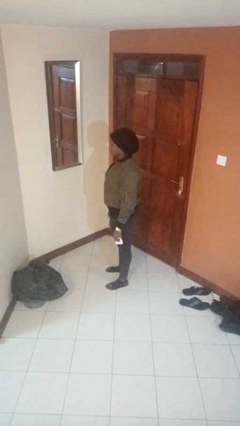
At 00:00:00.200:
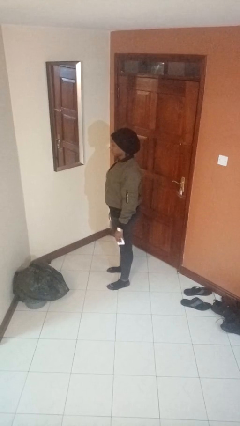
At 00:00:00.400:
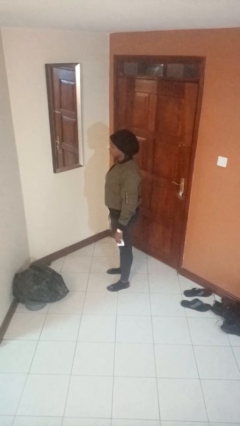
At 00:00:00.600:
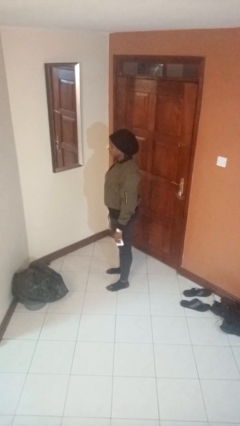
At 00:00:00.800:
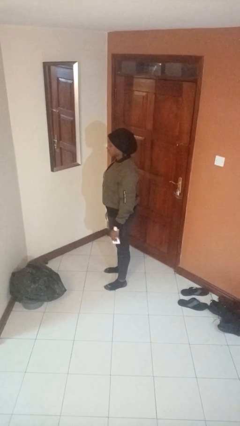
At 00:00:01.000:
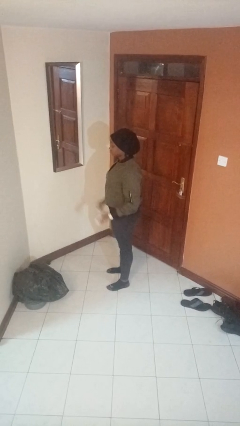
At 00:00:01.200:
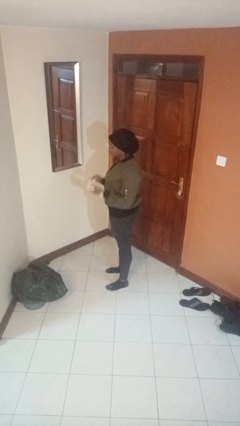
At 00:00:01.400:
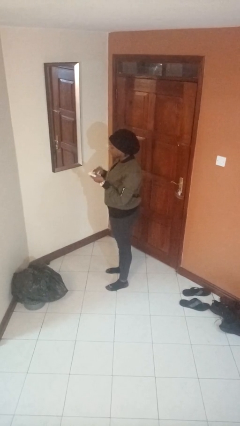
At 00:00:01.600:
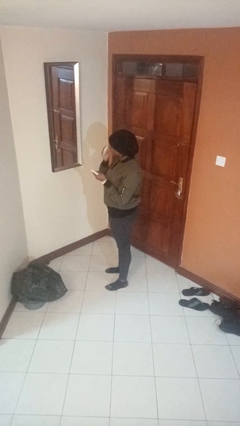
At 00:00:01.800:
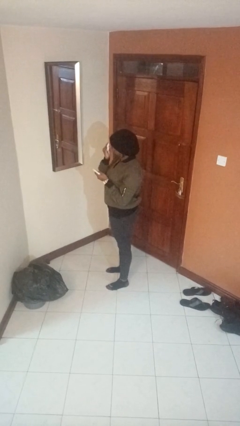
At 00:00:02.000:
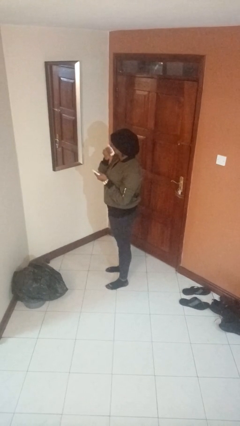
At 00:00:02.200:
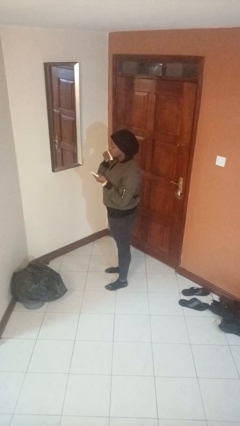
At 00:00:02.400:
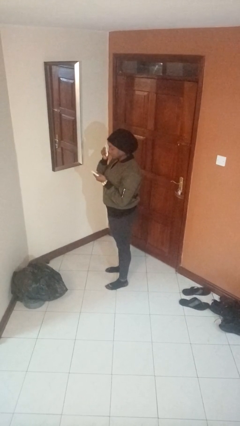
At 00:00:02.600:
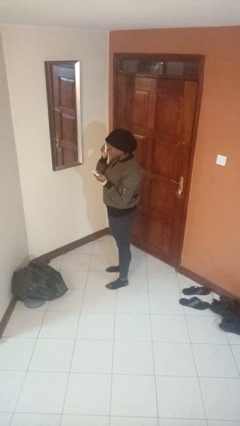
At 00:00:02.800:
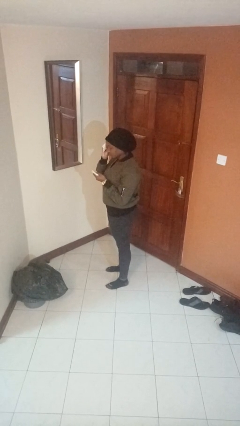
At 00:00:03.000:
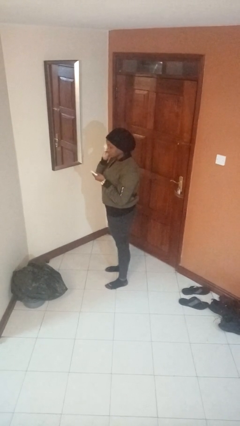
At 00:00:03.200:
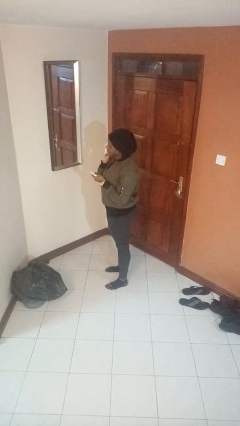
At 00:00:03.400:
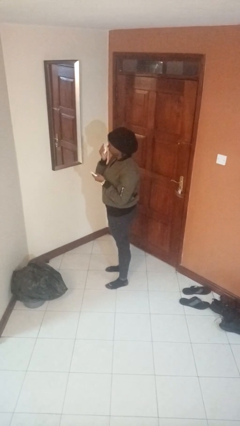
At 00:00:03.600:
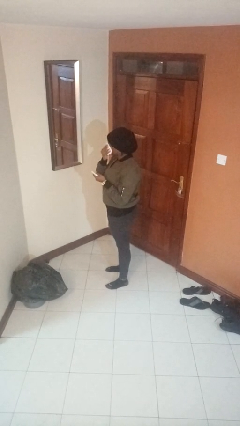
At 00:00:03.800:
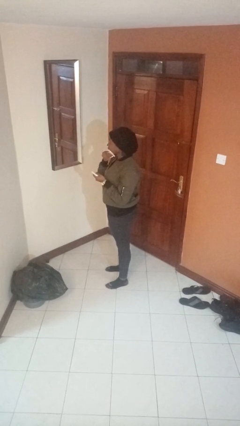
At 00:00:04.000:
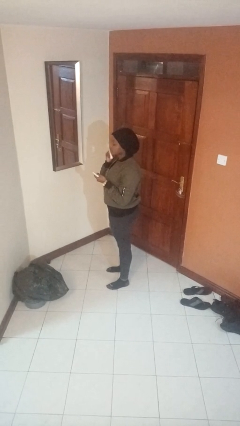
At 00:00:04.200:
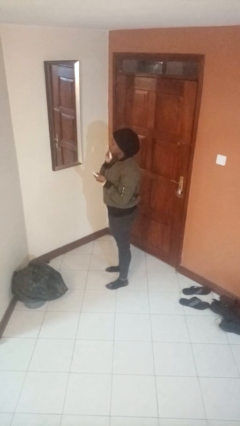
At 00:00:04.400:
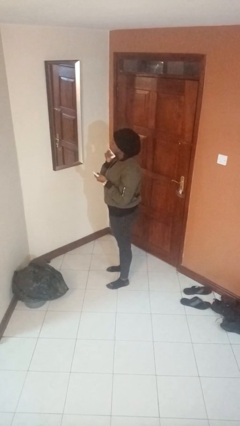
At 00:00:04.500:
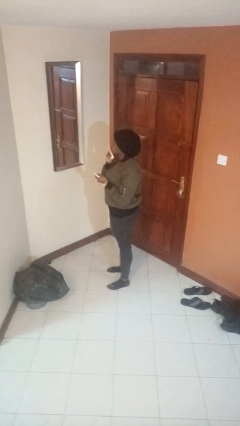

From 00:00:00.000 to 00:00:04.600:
person applies foundation makeup

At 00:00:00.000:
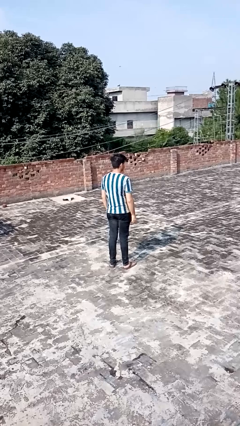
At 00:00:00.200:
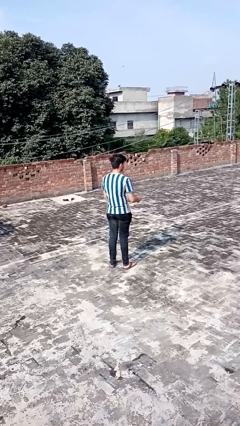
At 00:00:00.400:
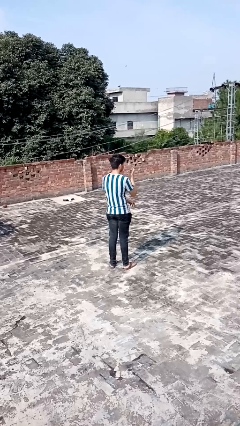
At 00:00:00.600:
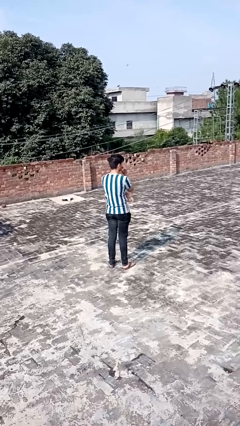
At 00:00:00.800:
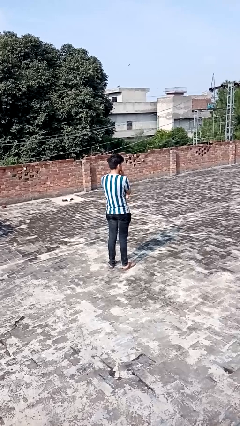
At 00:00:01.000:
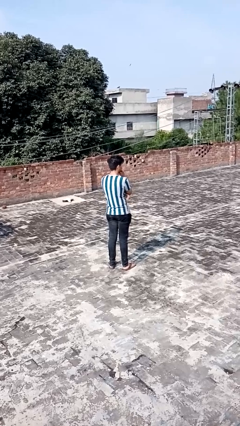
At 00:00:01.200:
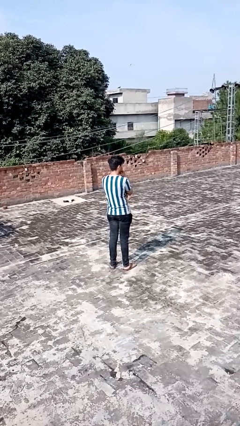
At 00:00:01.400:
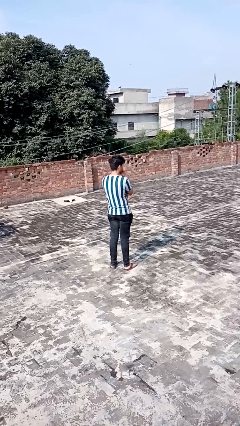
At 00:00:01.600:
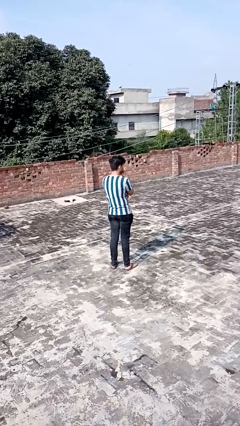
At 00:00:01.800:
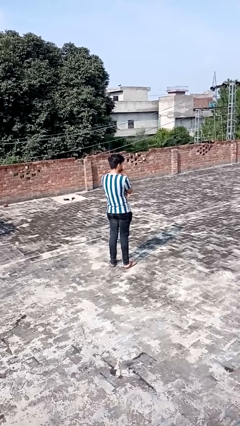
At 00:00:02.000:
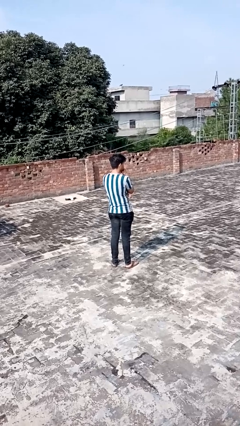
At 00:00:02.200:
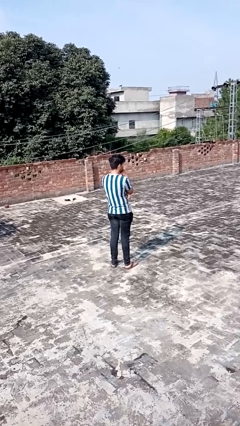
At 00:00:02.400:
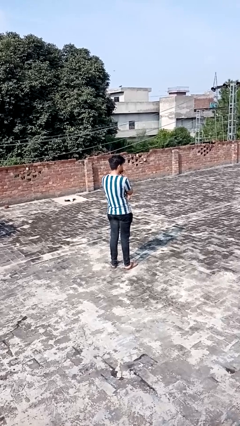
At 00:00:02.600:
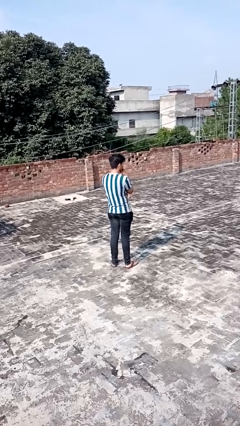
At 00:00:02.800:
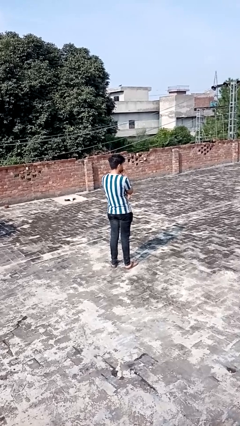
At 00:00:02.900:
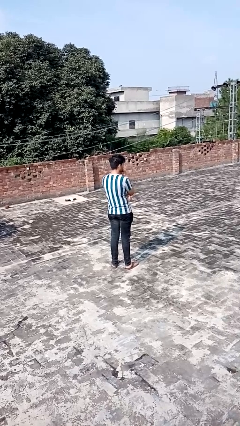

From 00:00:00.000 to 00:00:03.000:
person strokes chin

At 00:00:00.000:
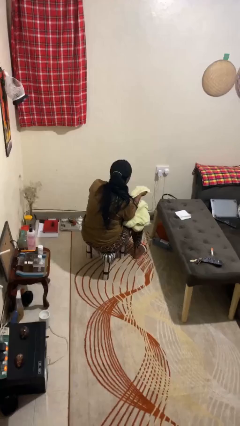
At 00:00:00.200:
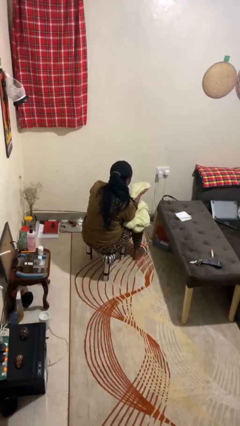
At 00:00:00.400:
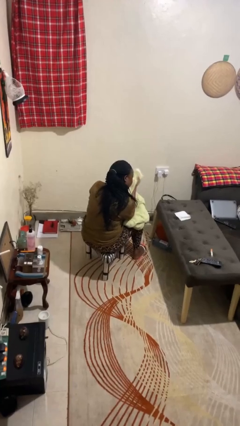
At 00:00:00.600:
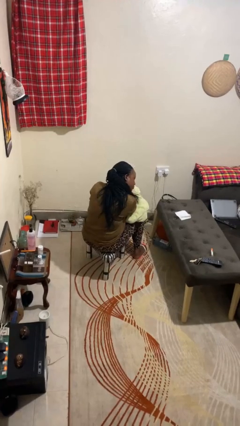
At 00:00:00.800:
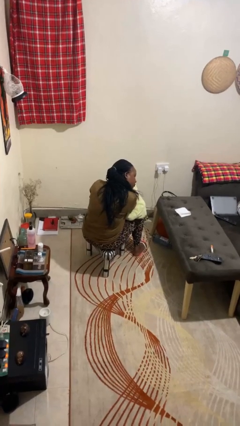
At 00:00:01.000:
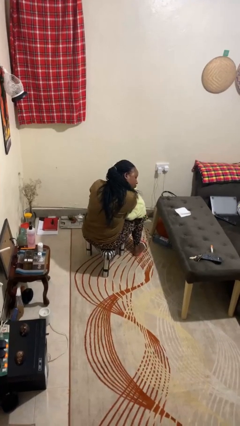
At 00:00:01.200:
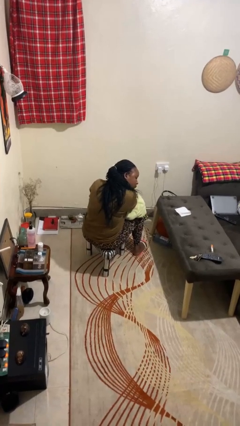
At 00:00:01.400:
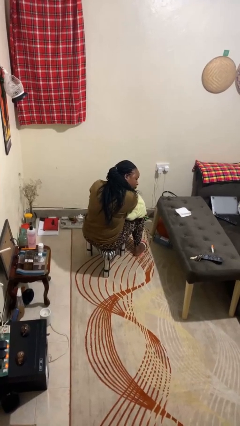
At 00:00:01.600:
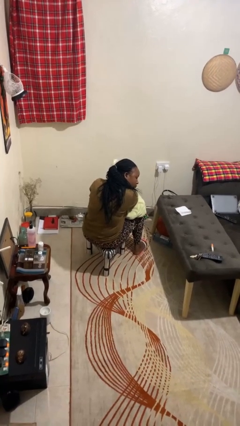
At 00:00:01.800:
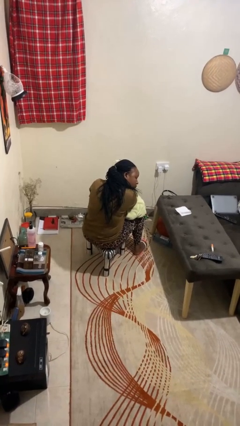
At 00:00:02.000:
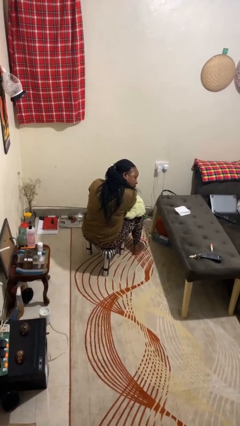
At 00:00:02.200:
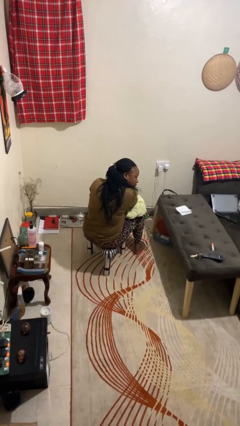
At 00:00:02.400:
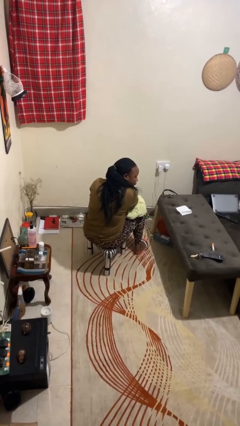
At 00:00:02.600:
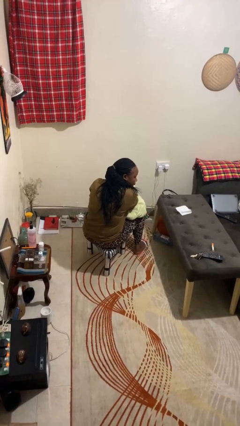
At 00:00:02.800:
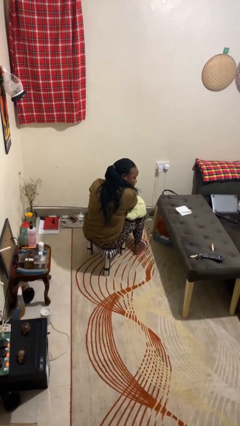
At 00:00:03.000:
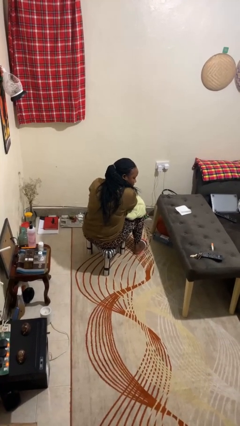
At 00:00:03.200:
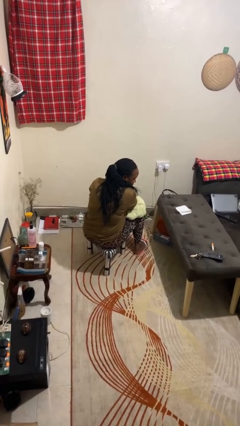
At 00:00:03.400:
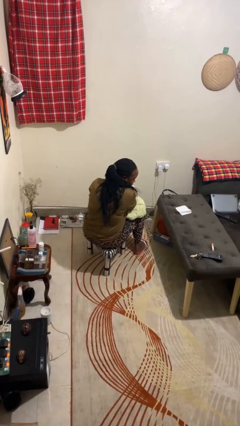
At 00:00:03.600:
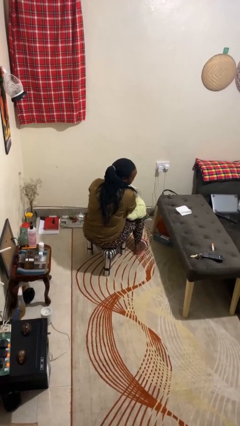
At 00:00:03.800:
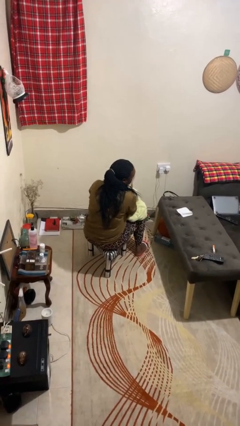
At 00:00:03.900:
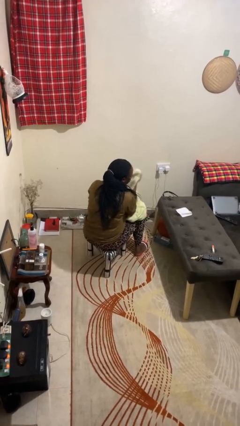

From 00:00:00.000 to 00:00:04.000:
person dries hair with towel

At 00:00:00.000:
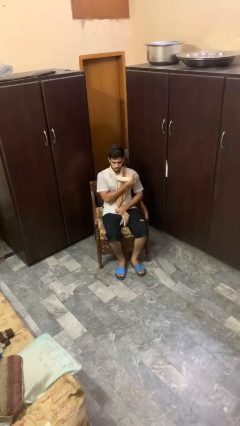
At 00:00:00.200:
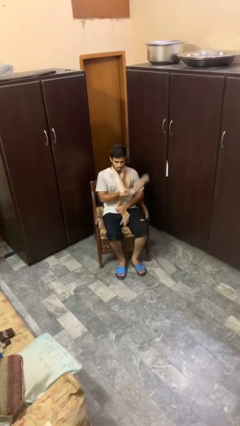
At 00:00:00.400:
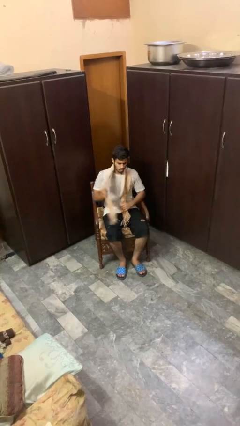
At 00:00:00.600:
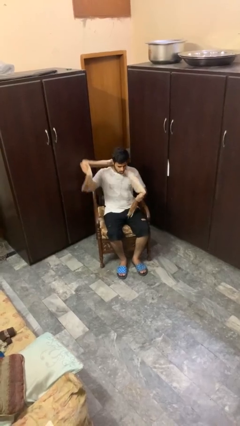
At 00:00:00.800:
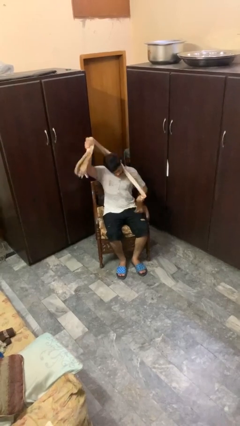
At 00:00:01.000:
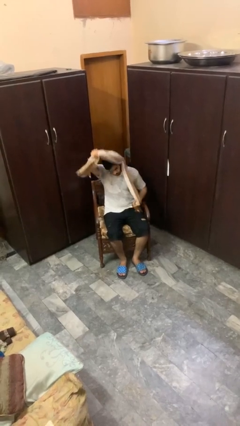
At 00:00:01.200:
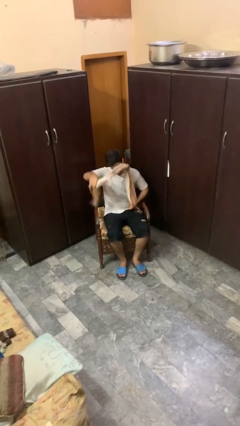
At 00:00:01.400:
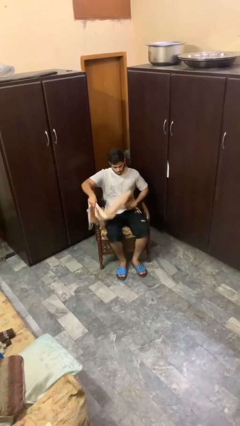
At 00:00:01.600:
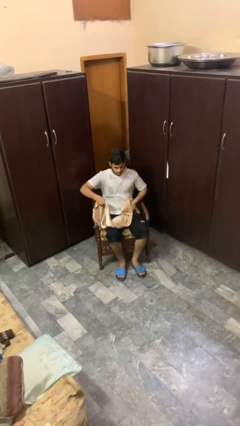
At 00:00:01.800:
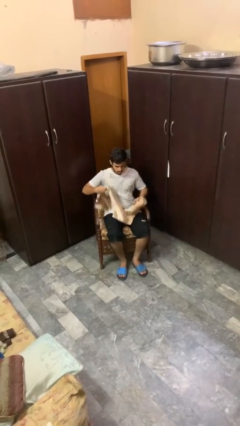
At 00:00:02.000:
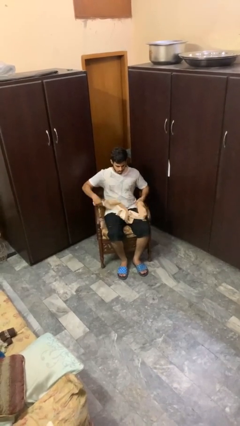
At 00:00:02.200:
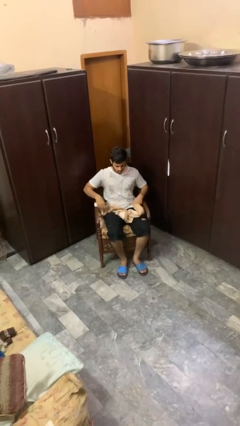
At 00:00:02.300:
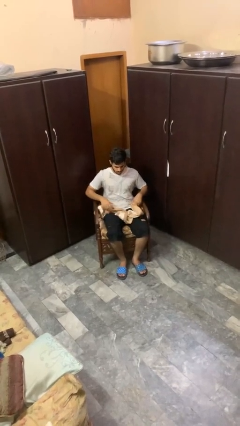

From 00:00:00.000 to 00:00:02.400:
person takes off scarf

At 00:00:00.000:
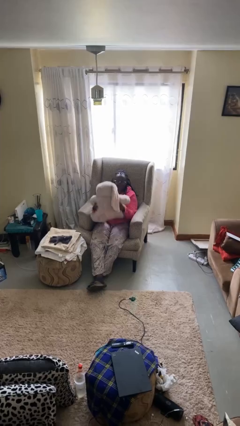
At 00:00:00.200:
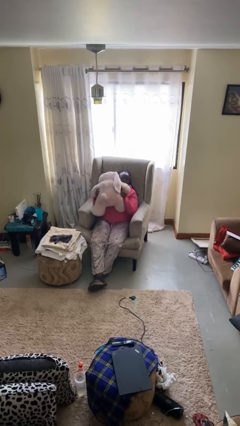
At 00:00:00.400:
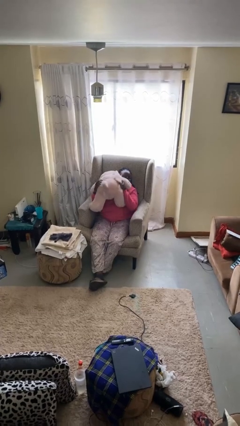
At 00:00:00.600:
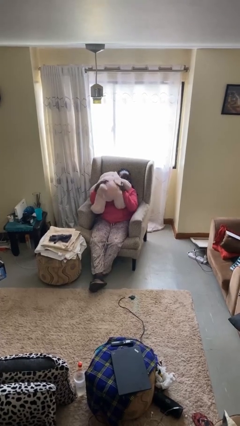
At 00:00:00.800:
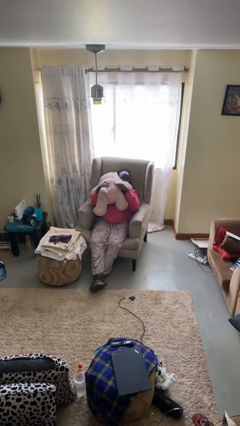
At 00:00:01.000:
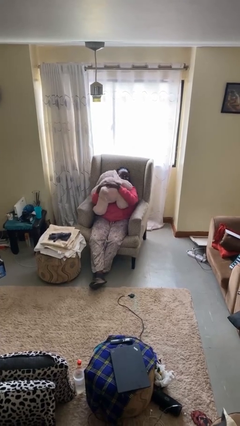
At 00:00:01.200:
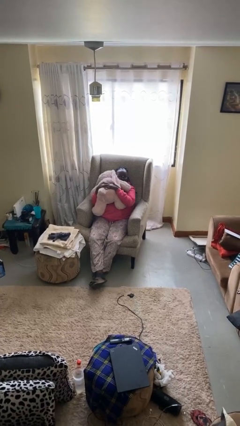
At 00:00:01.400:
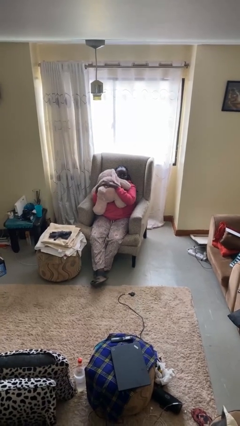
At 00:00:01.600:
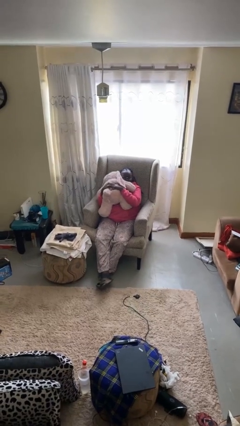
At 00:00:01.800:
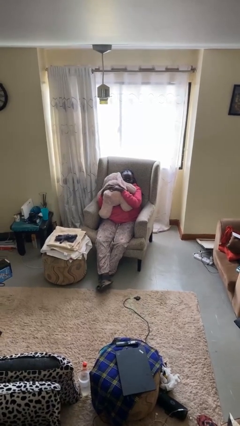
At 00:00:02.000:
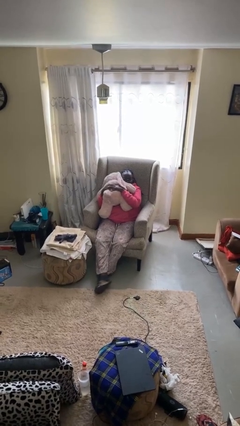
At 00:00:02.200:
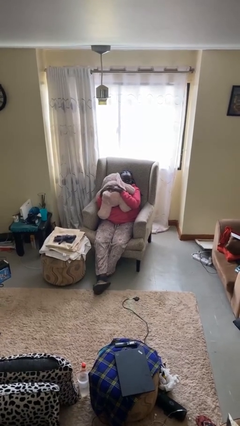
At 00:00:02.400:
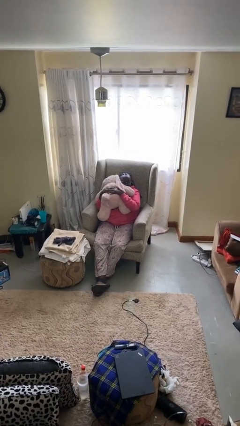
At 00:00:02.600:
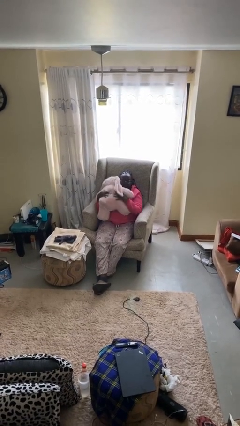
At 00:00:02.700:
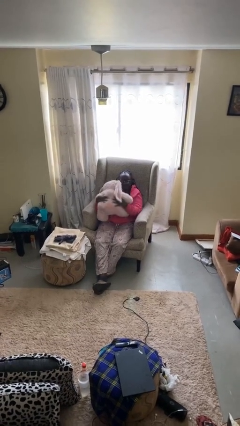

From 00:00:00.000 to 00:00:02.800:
person hugs stuffed animal

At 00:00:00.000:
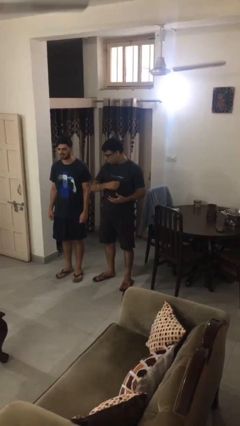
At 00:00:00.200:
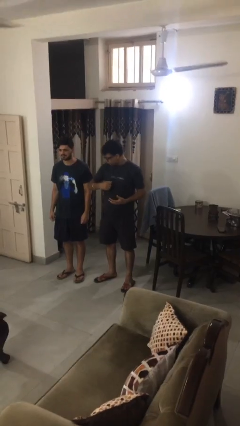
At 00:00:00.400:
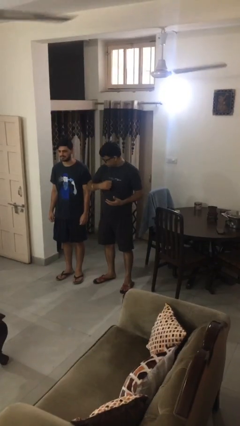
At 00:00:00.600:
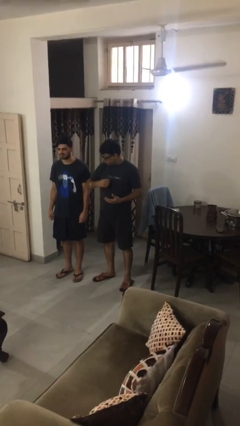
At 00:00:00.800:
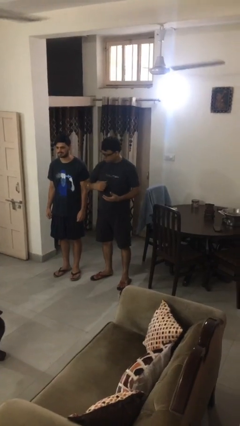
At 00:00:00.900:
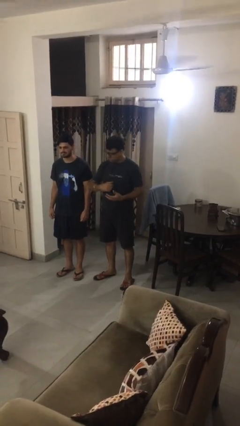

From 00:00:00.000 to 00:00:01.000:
person nudges person with elbow
